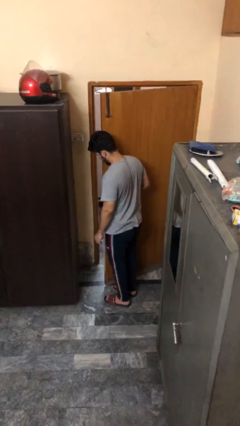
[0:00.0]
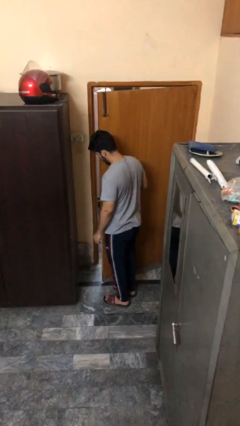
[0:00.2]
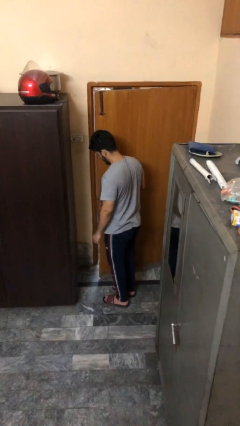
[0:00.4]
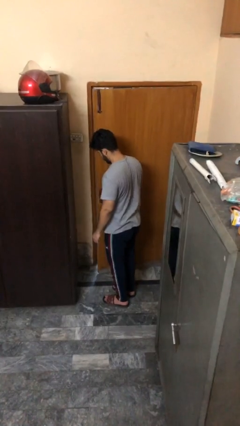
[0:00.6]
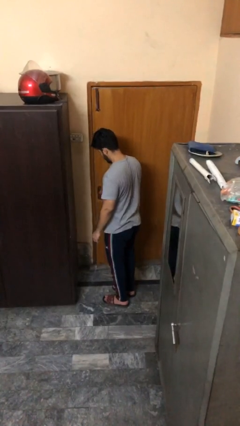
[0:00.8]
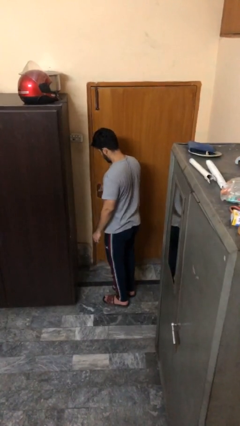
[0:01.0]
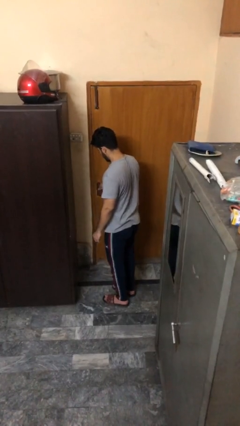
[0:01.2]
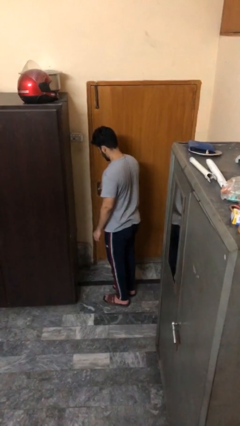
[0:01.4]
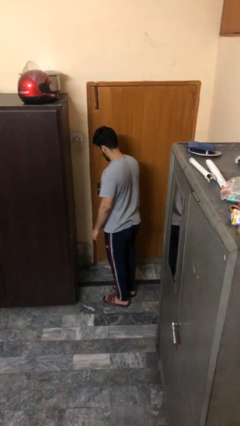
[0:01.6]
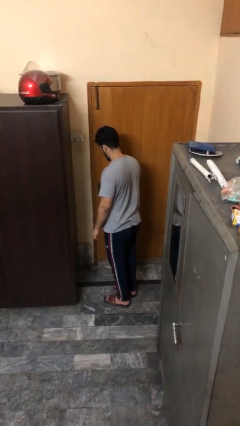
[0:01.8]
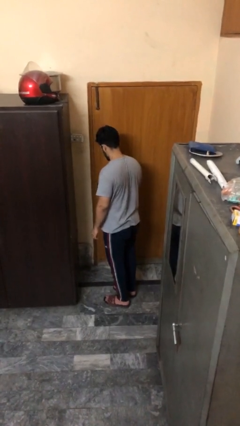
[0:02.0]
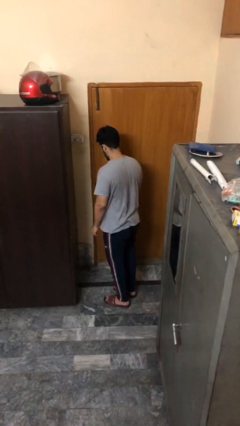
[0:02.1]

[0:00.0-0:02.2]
person closes facility door

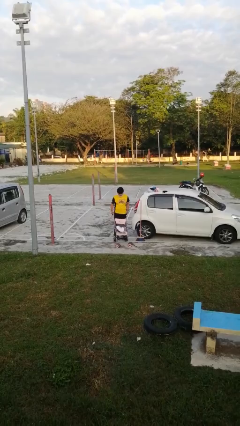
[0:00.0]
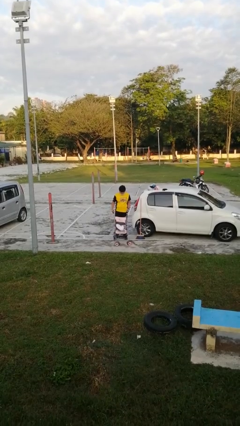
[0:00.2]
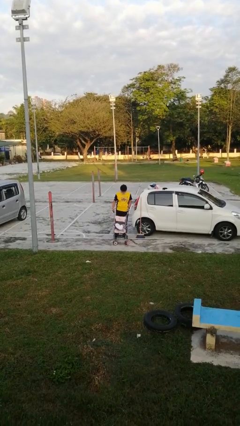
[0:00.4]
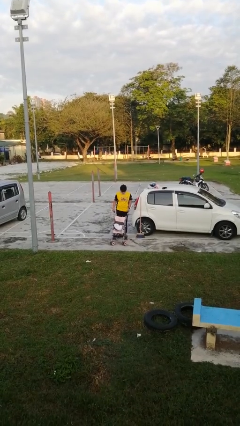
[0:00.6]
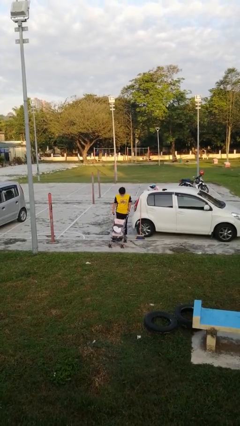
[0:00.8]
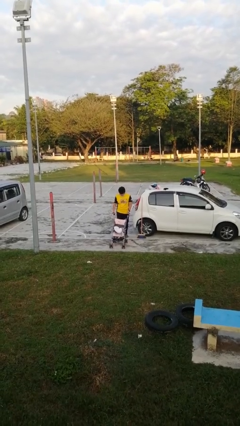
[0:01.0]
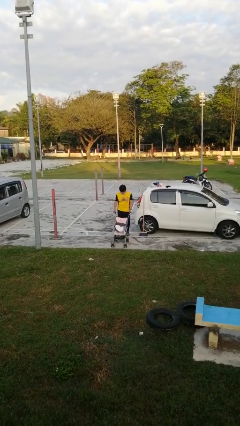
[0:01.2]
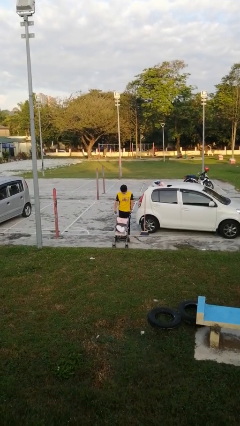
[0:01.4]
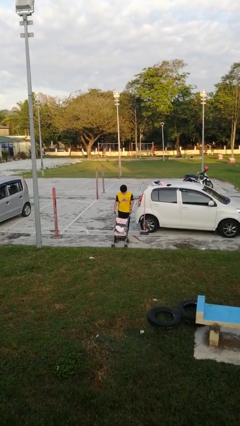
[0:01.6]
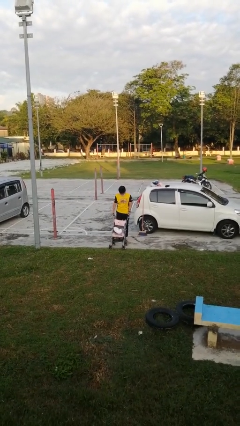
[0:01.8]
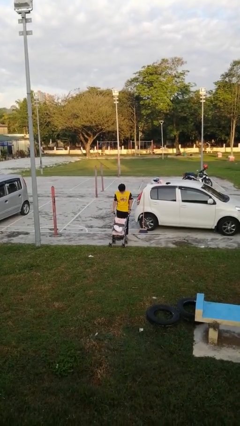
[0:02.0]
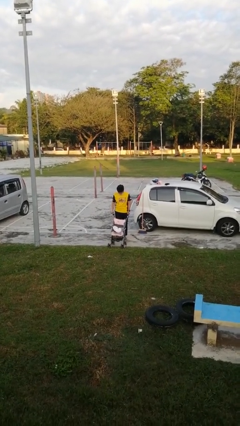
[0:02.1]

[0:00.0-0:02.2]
person pushes wheeled cart

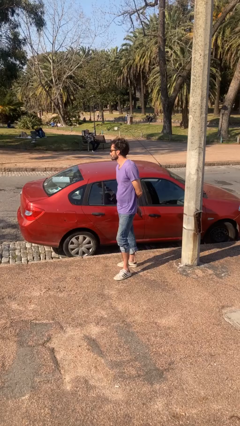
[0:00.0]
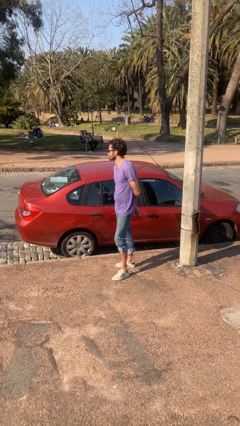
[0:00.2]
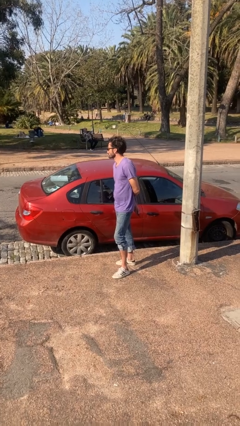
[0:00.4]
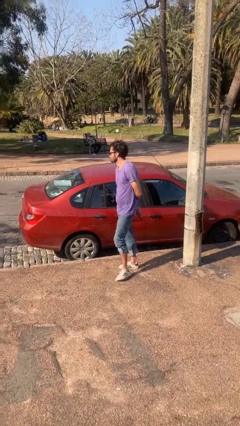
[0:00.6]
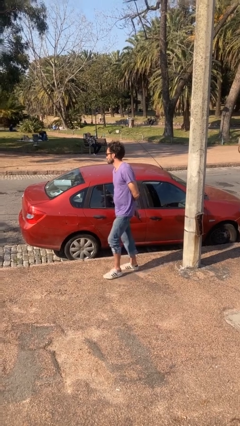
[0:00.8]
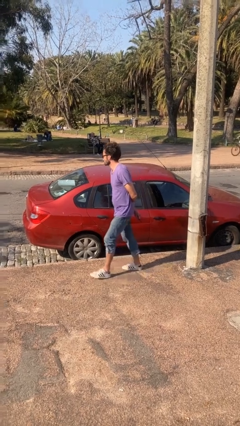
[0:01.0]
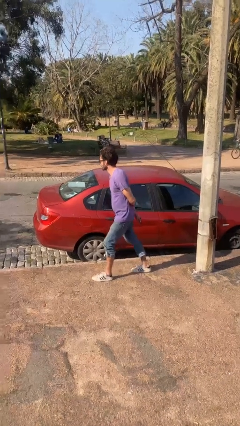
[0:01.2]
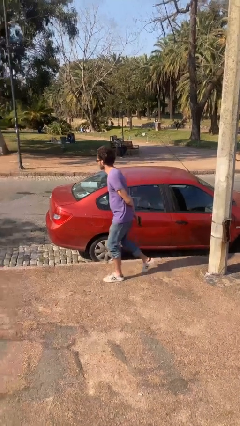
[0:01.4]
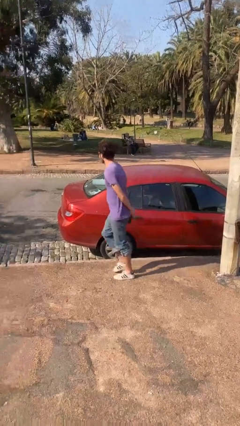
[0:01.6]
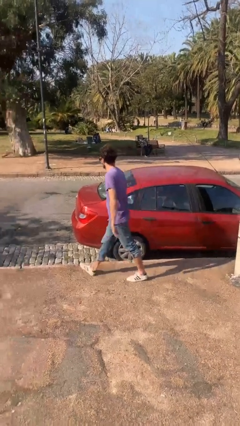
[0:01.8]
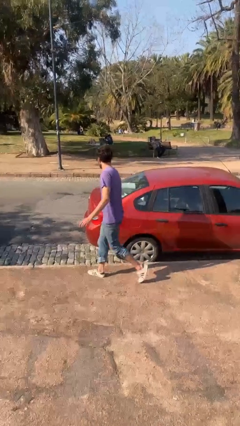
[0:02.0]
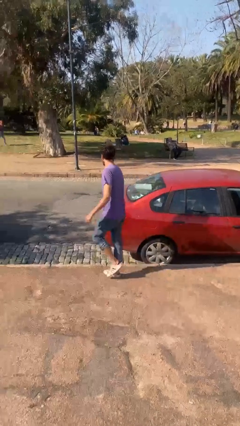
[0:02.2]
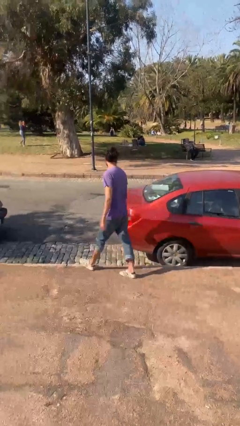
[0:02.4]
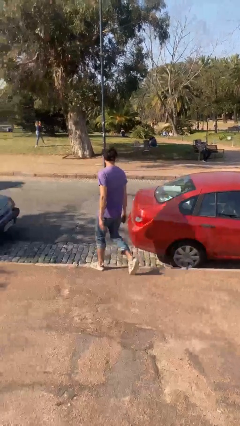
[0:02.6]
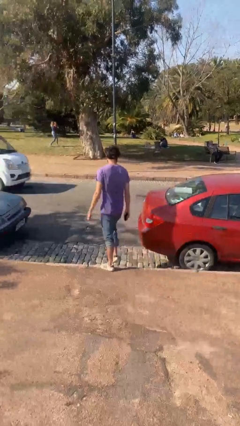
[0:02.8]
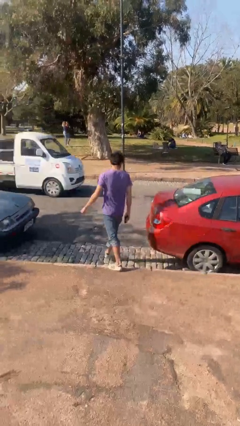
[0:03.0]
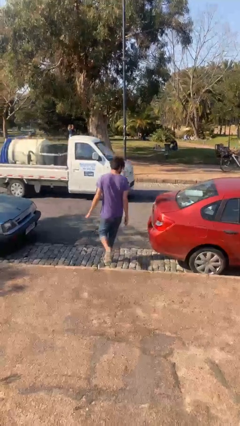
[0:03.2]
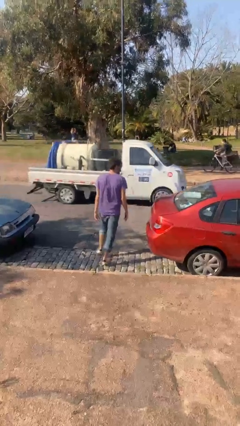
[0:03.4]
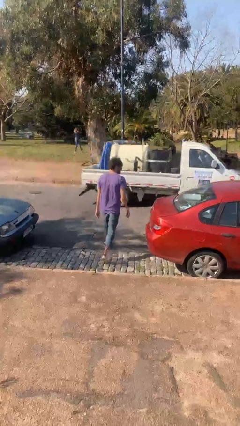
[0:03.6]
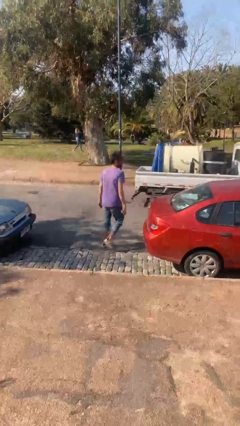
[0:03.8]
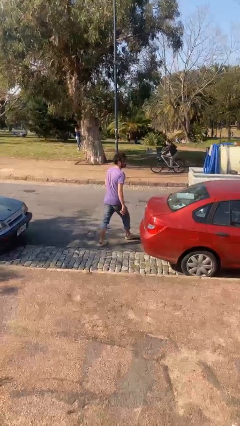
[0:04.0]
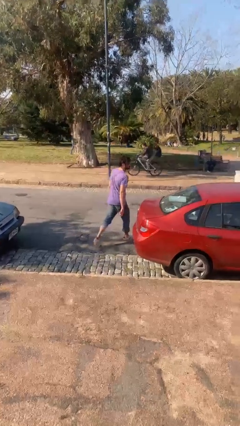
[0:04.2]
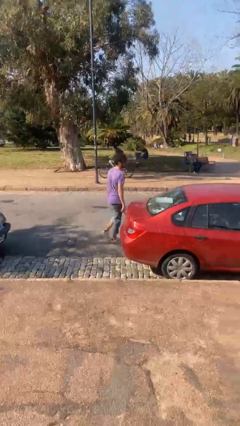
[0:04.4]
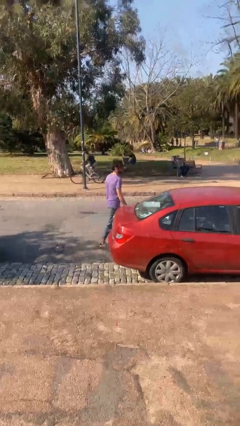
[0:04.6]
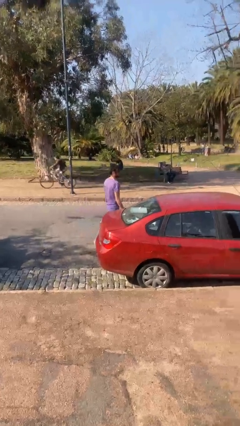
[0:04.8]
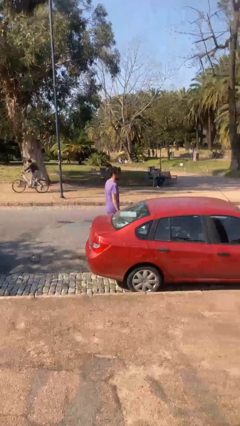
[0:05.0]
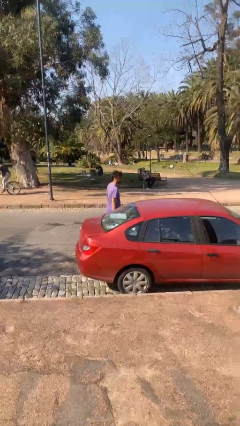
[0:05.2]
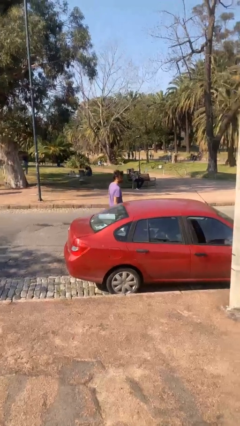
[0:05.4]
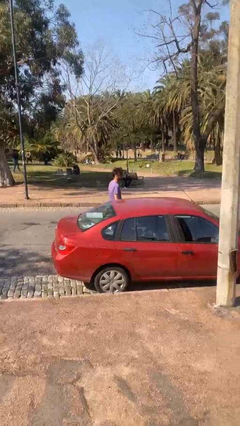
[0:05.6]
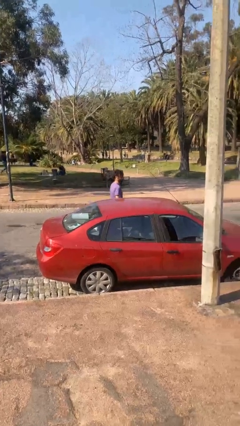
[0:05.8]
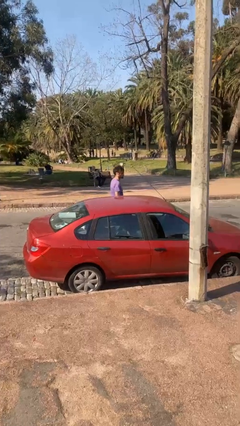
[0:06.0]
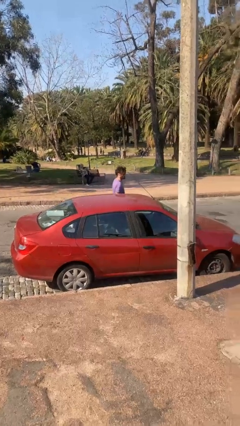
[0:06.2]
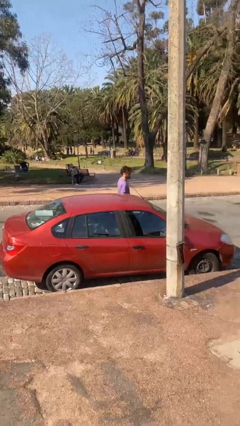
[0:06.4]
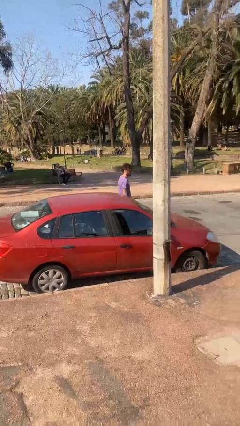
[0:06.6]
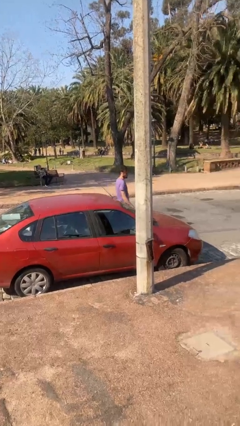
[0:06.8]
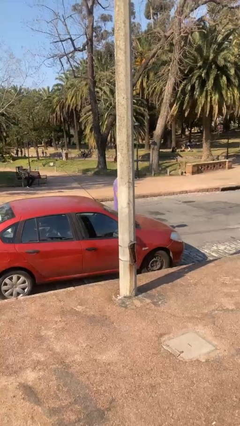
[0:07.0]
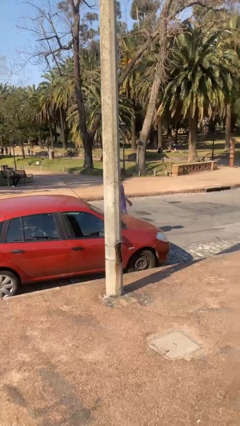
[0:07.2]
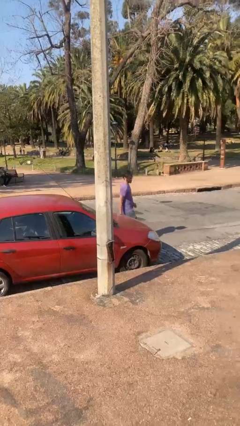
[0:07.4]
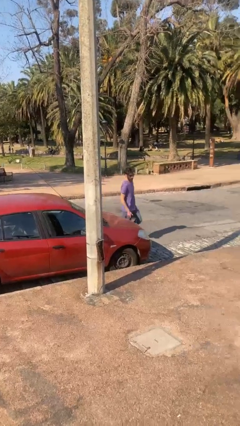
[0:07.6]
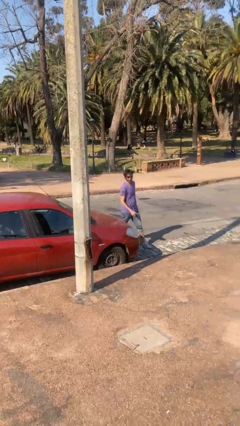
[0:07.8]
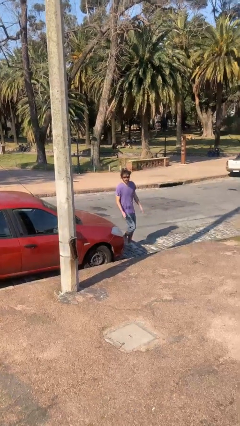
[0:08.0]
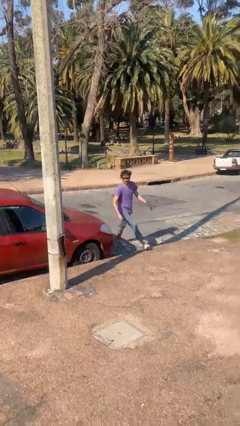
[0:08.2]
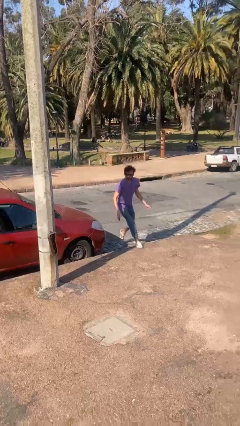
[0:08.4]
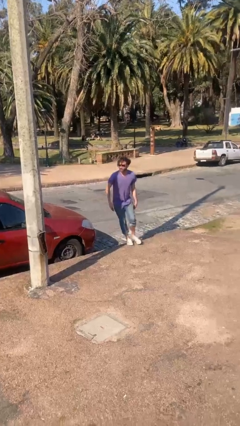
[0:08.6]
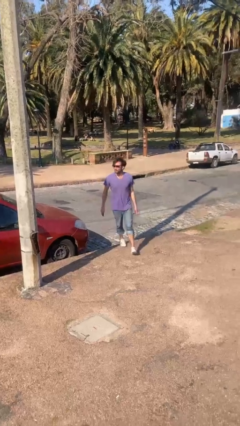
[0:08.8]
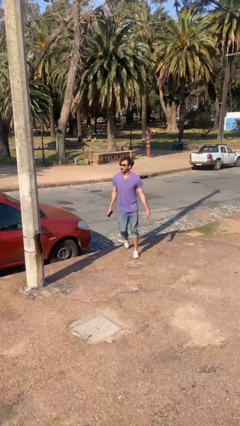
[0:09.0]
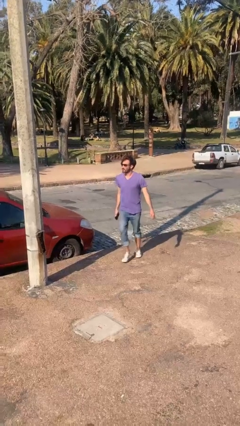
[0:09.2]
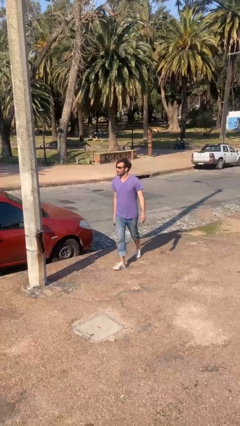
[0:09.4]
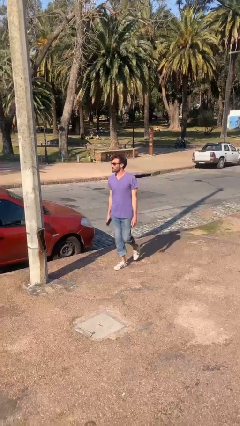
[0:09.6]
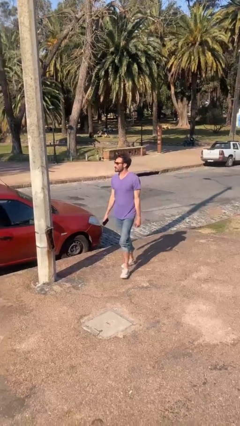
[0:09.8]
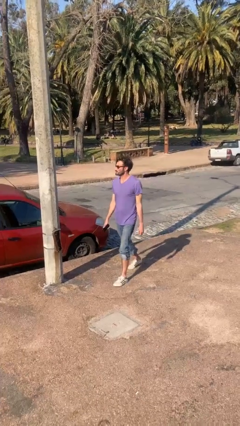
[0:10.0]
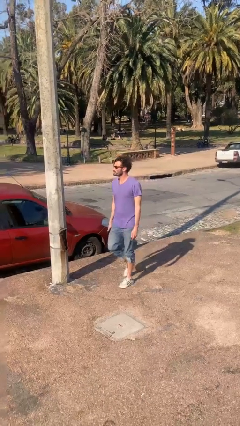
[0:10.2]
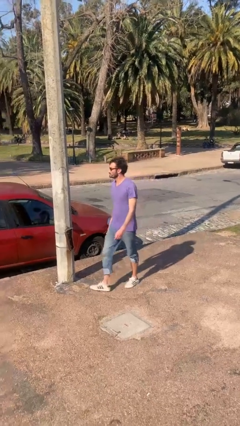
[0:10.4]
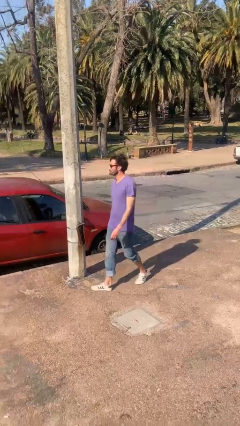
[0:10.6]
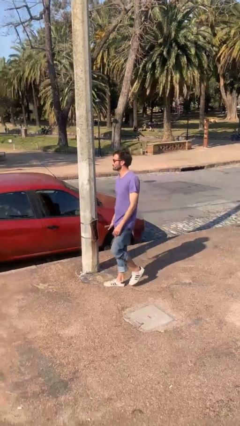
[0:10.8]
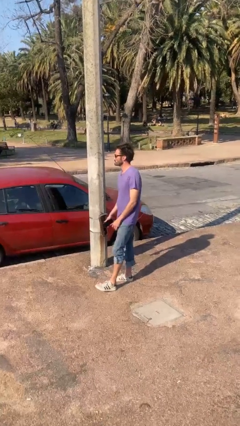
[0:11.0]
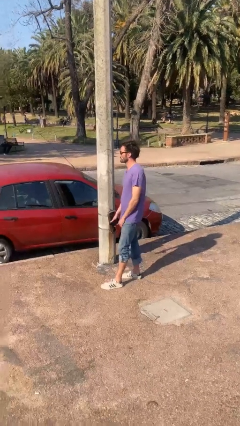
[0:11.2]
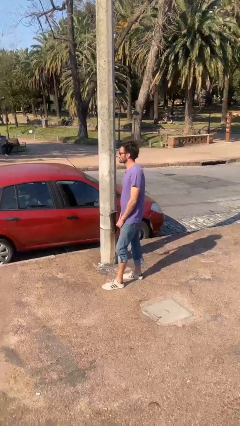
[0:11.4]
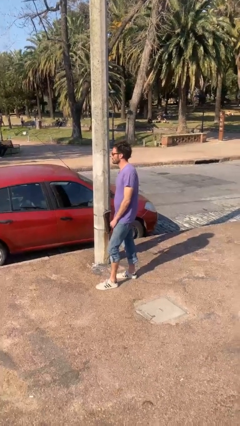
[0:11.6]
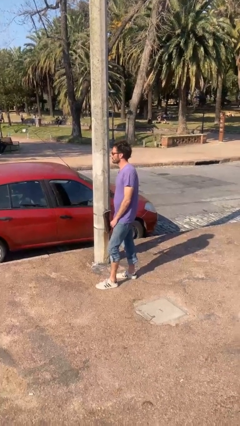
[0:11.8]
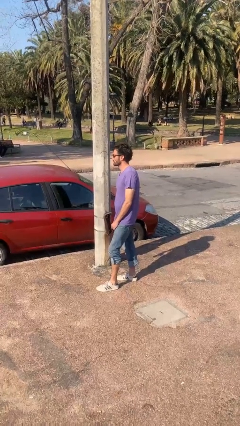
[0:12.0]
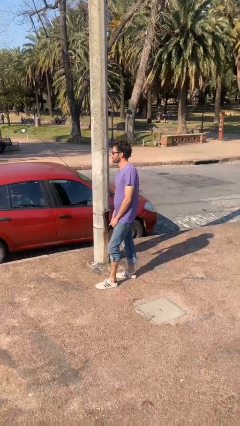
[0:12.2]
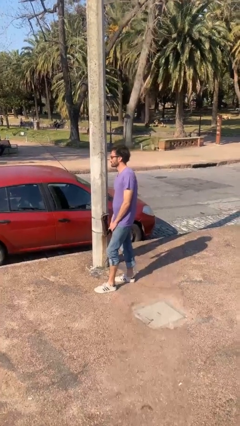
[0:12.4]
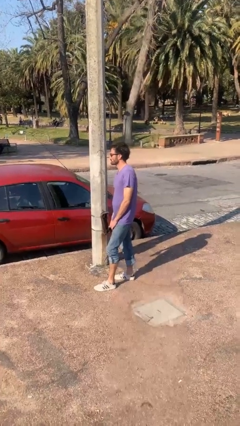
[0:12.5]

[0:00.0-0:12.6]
person walks around car

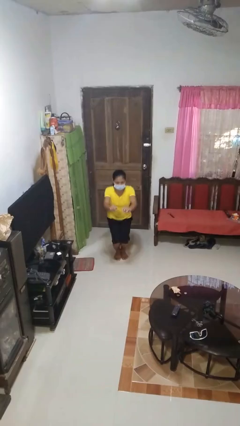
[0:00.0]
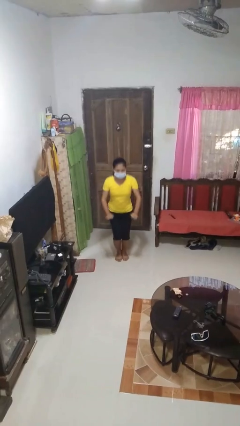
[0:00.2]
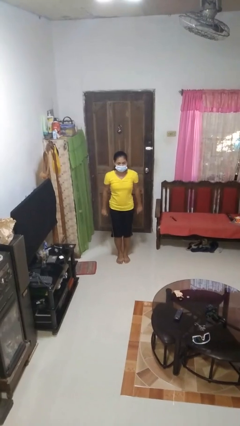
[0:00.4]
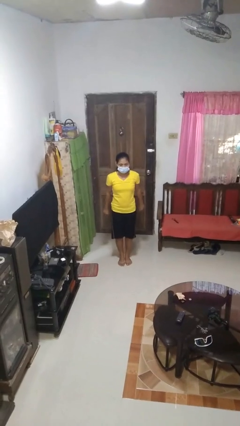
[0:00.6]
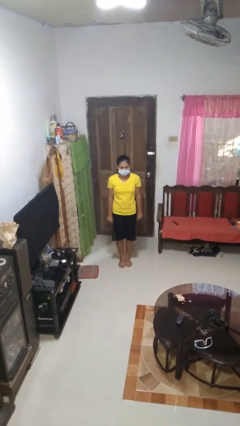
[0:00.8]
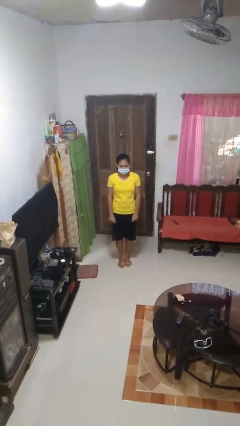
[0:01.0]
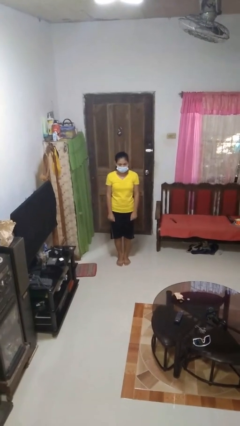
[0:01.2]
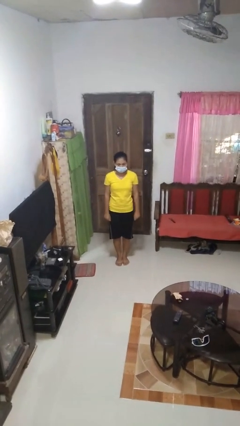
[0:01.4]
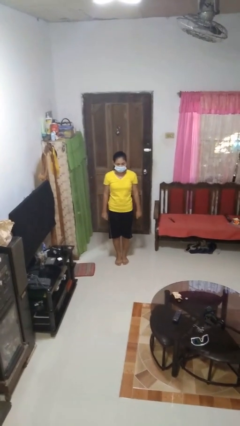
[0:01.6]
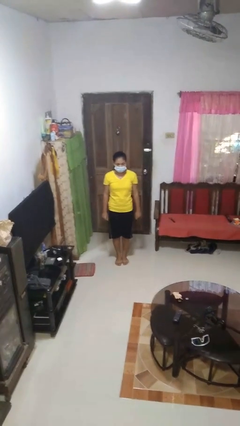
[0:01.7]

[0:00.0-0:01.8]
person stands up
